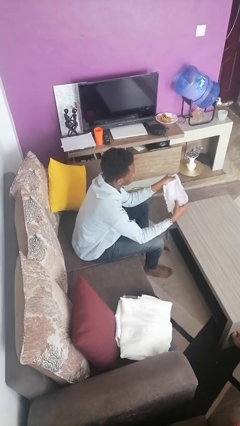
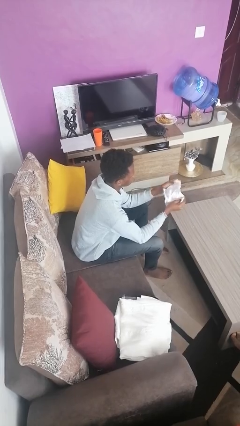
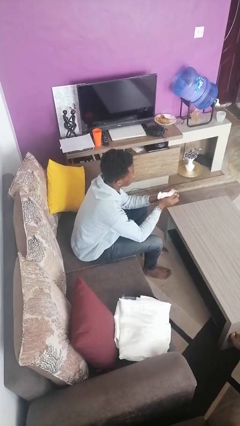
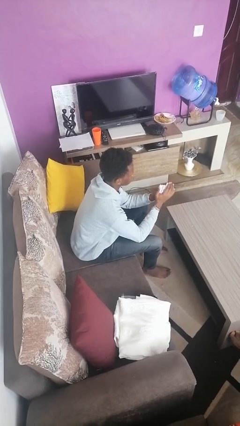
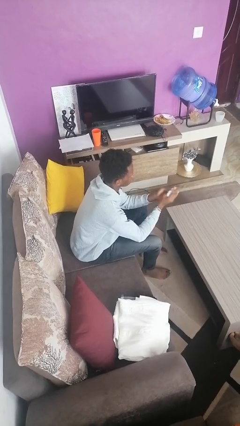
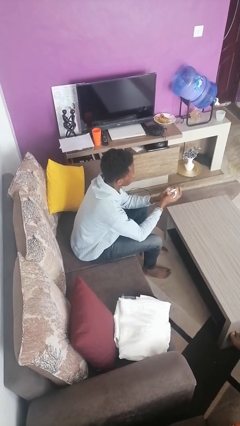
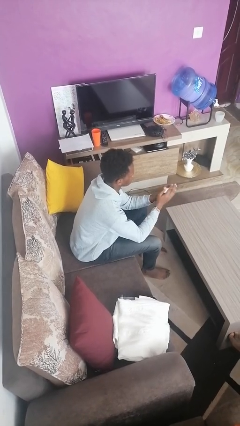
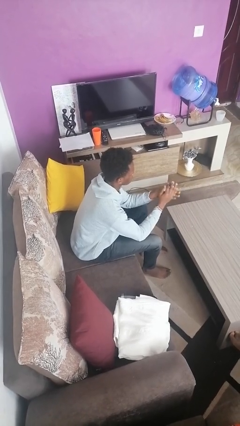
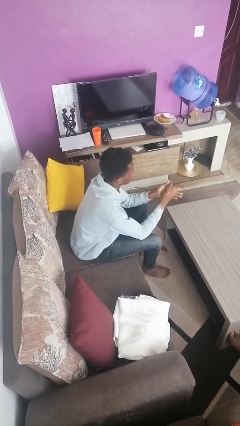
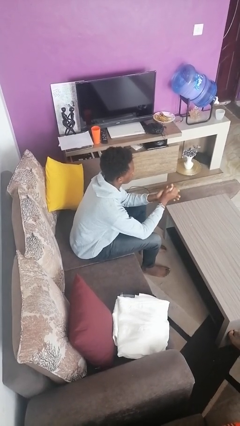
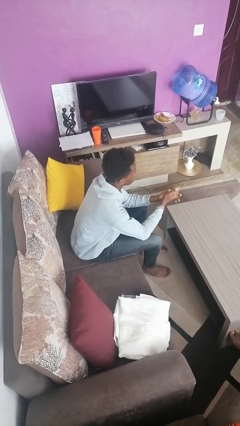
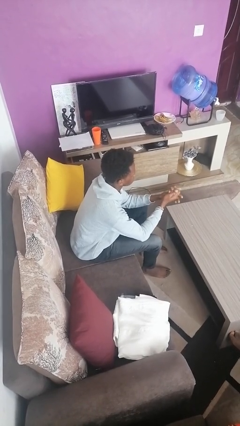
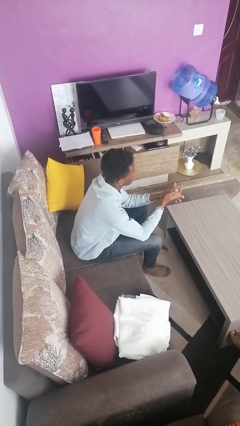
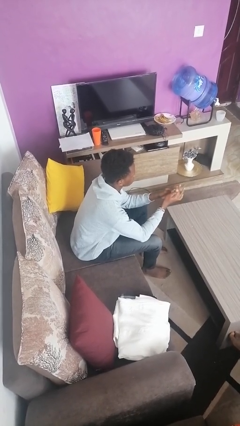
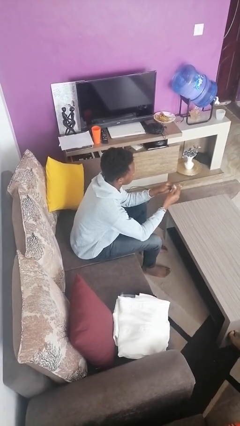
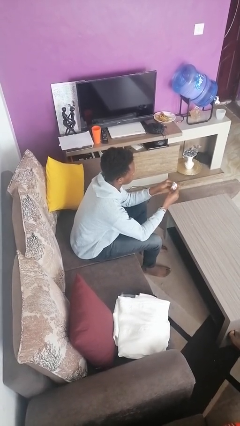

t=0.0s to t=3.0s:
person crumples paper

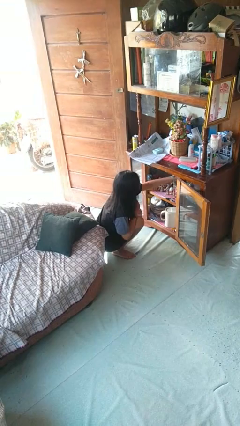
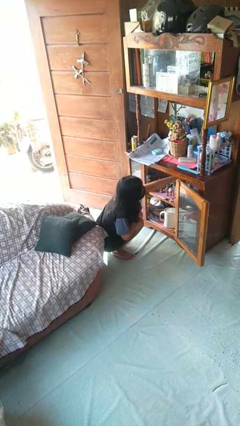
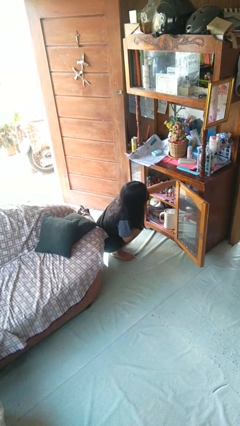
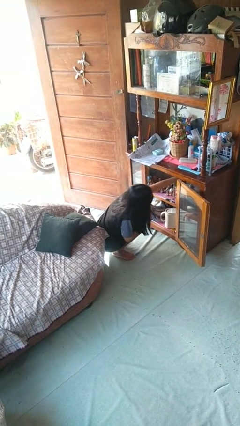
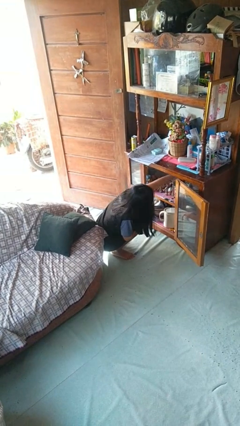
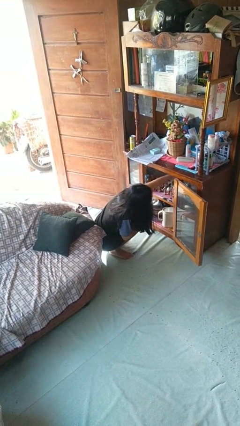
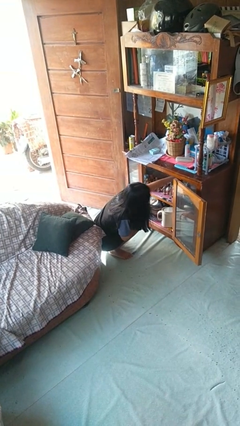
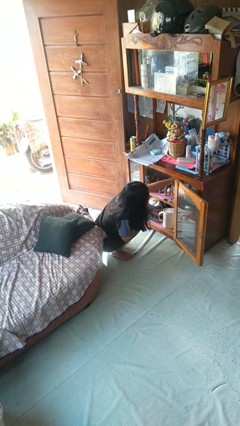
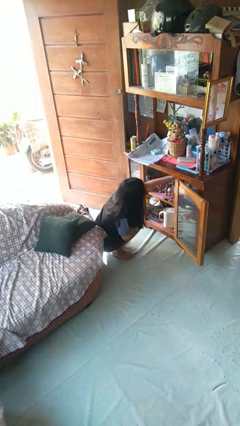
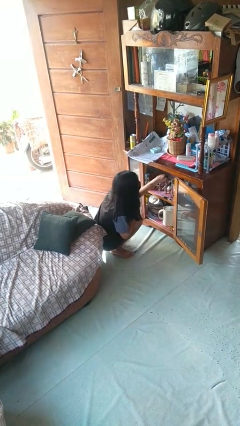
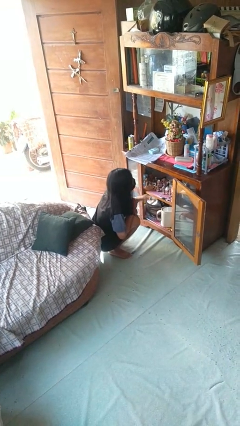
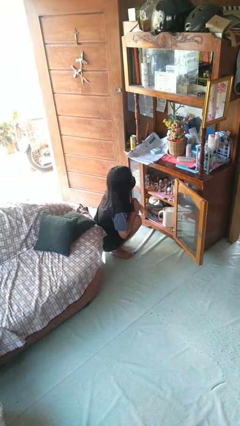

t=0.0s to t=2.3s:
person searches in cabinet

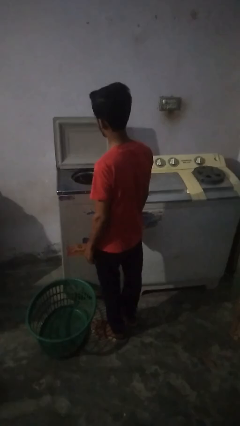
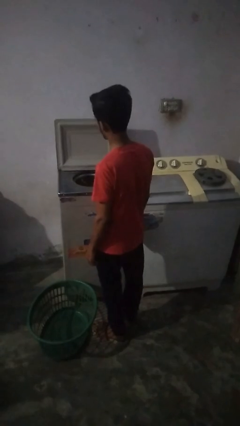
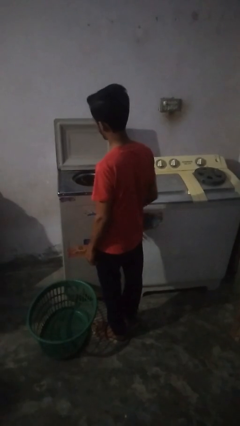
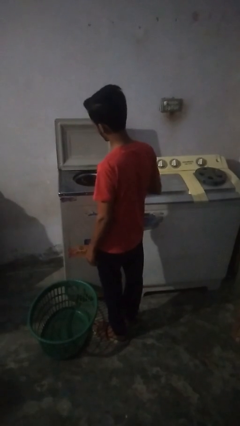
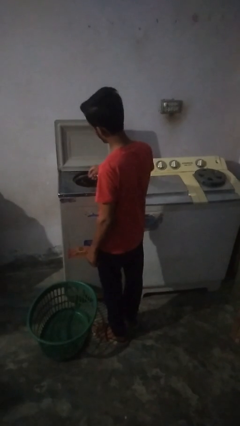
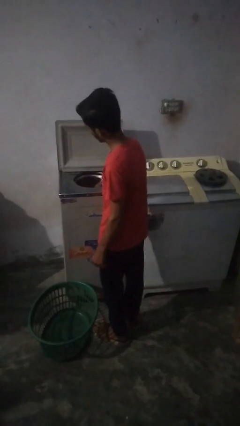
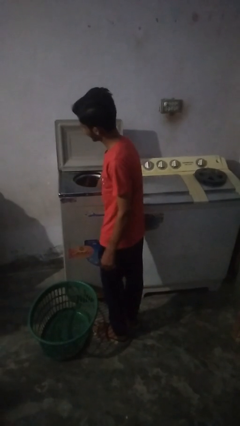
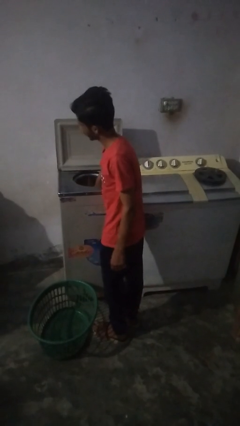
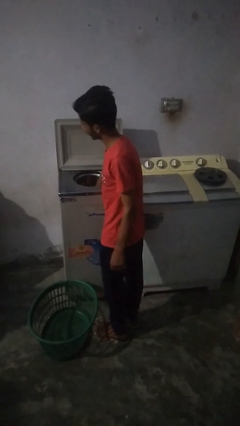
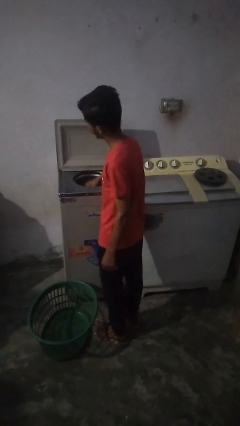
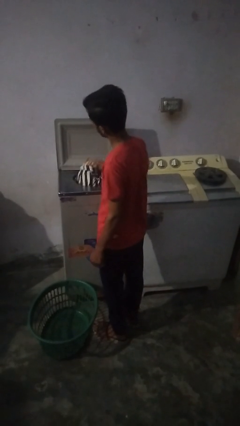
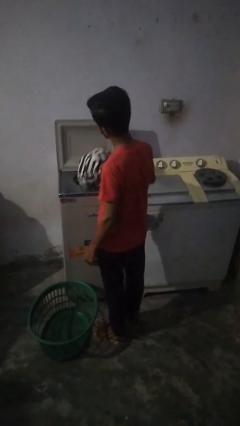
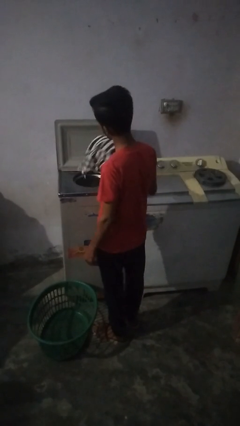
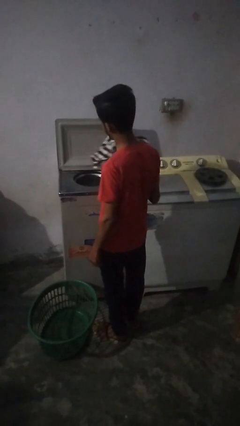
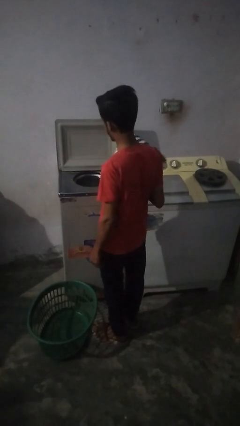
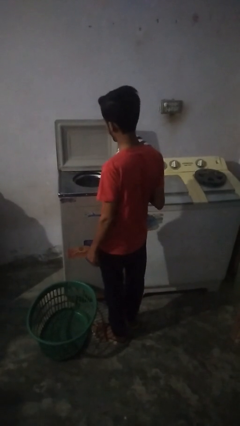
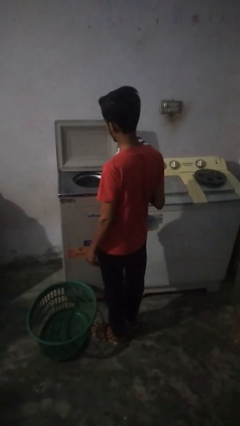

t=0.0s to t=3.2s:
person unloads dryer

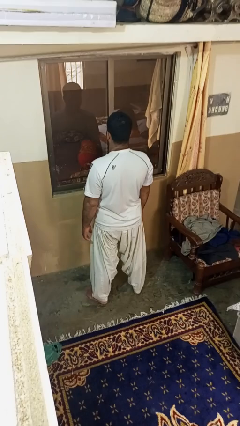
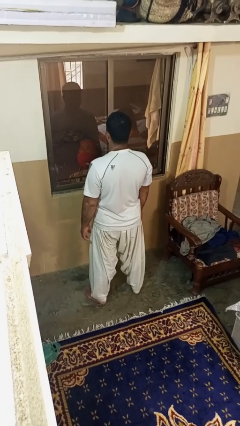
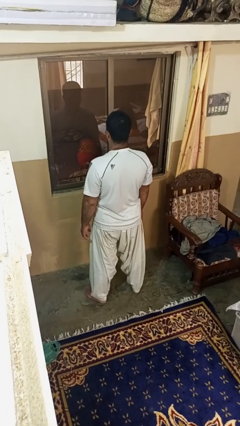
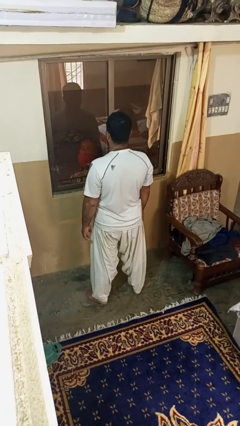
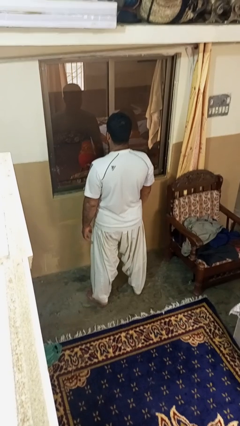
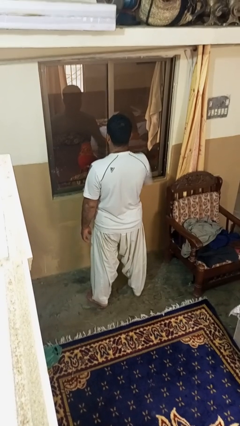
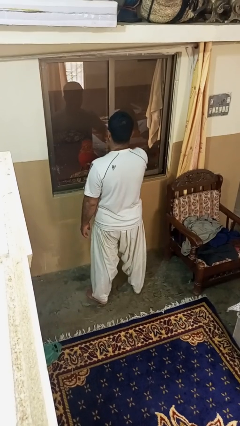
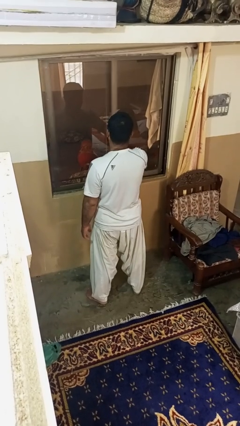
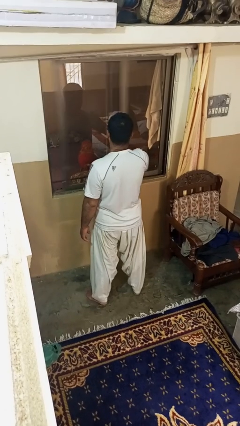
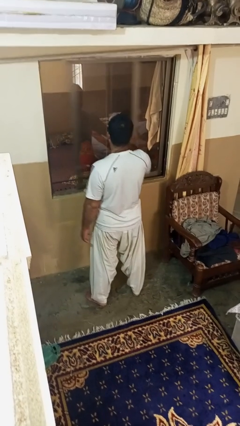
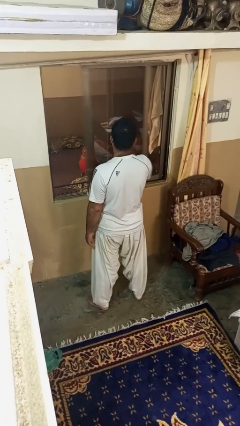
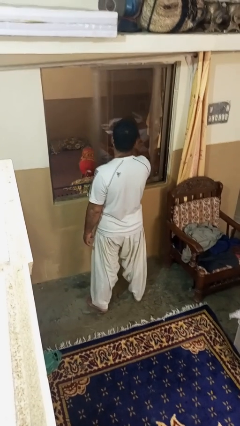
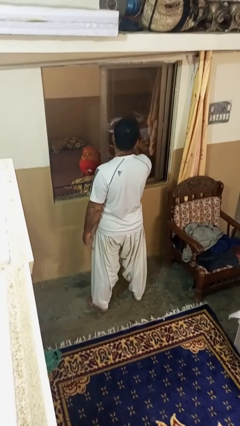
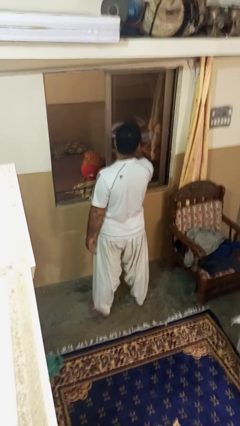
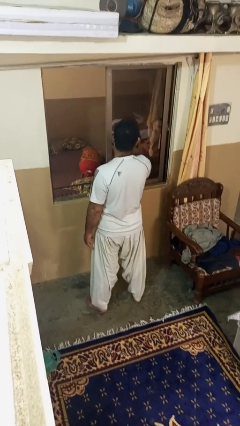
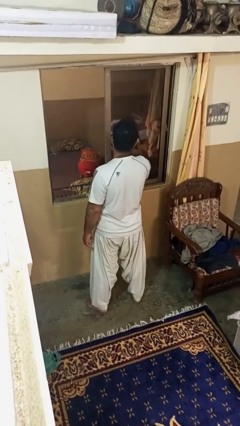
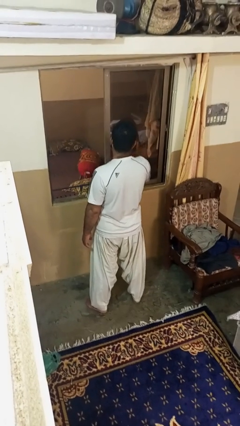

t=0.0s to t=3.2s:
person opens home window

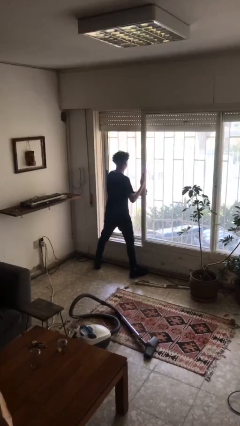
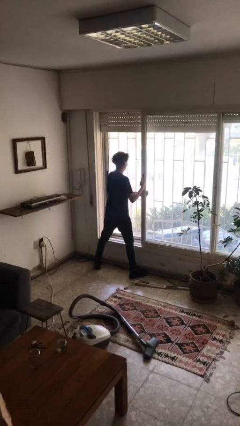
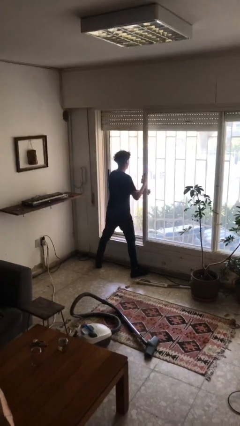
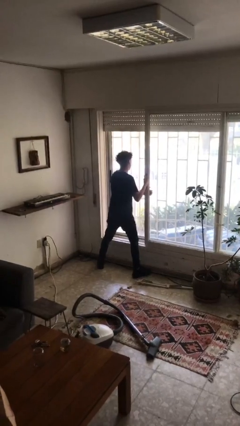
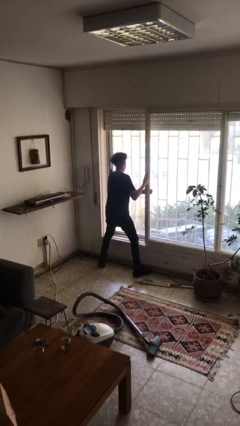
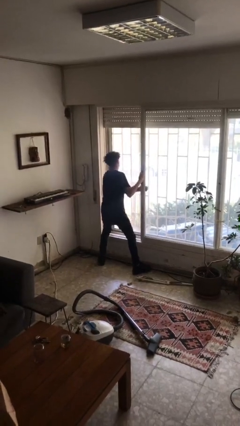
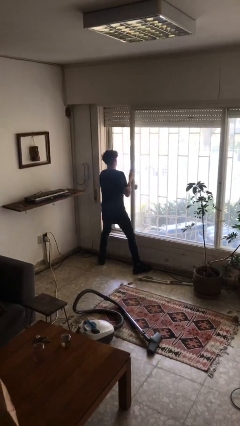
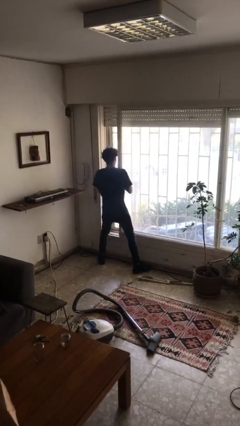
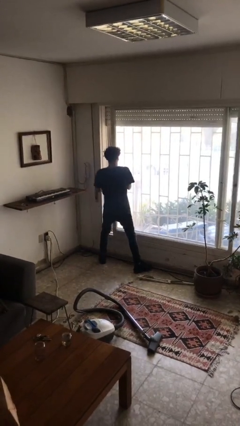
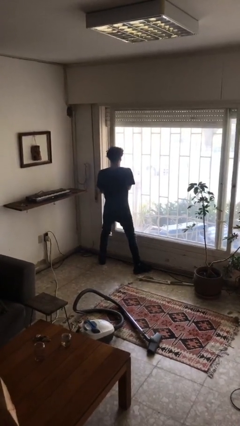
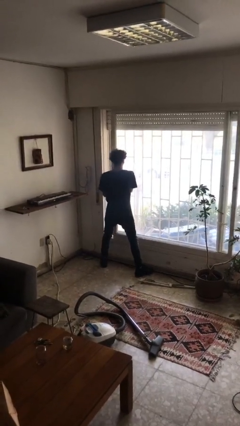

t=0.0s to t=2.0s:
person closes sliding door

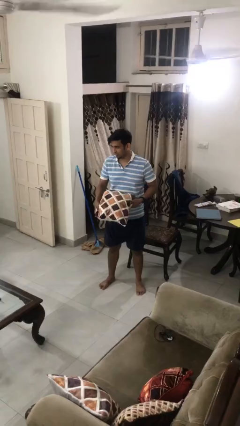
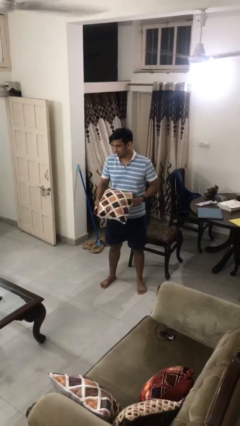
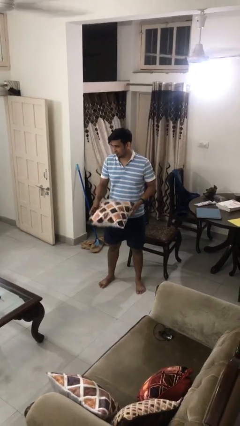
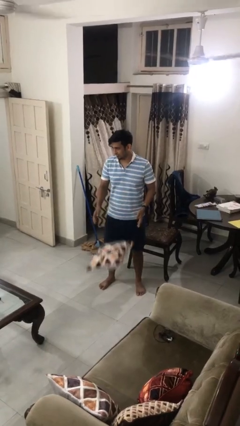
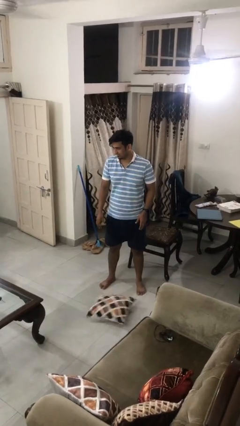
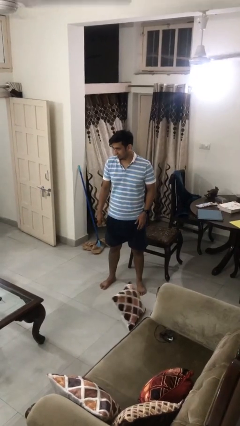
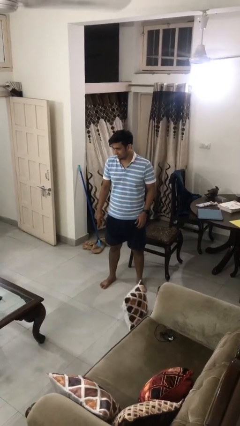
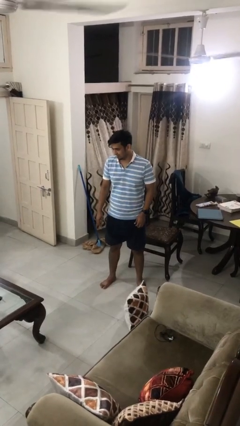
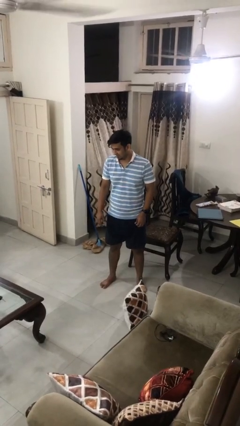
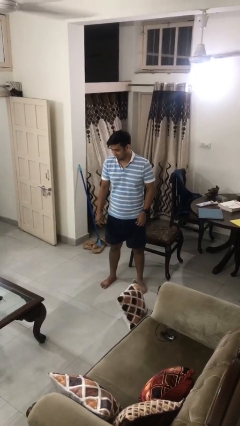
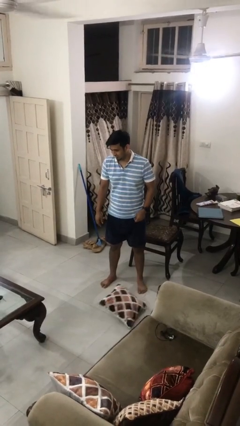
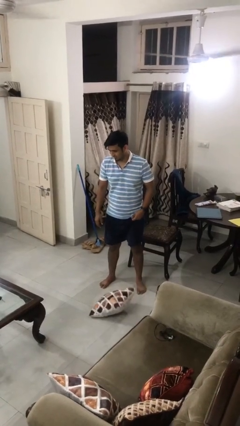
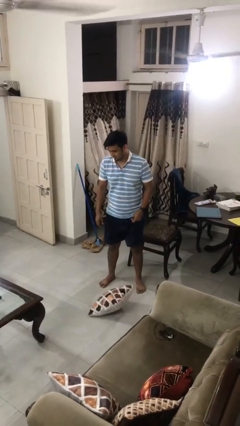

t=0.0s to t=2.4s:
person drops object

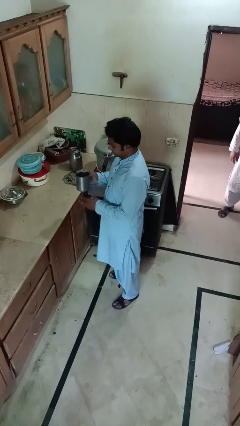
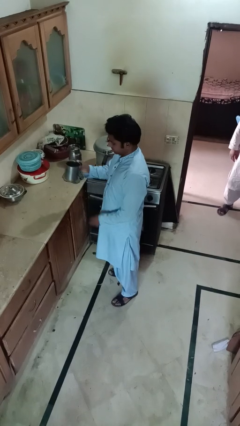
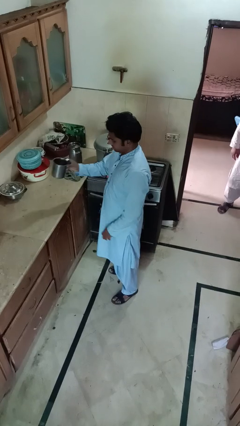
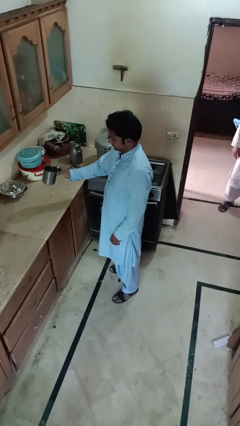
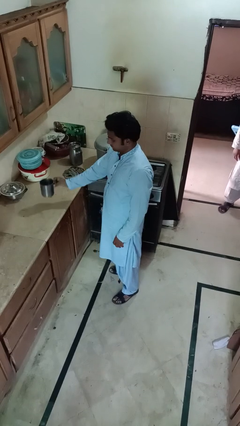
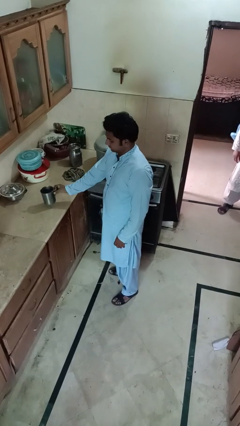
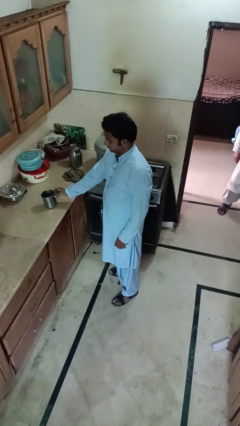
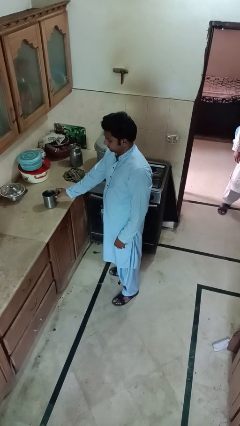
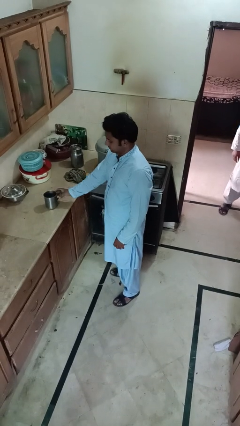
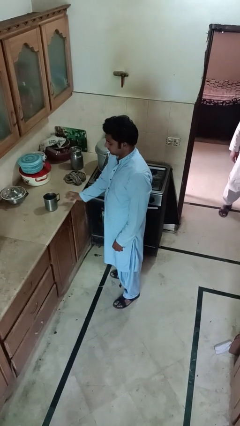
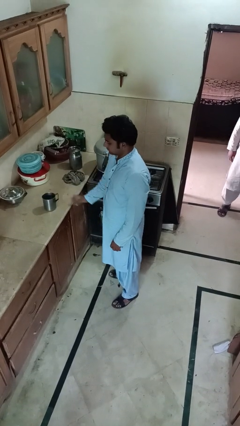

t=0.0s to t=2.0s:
person puts down object on countertop
